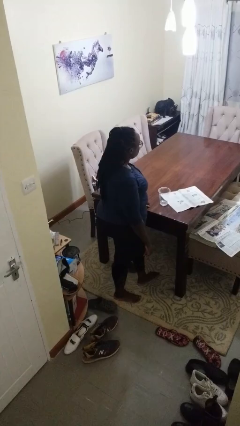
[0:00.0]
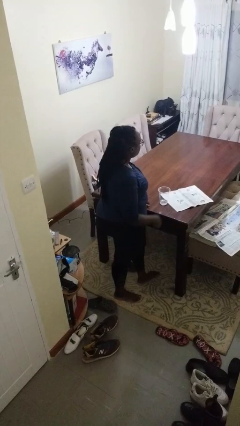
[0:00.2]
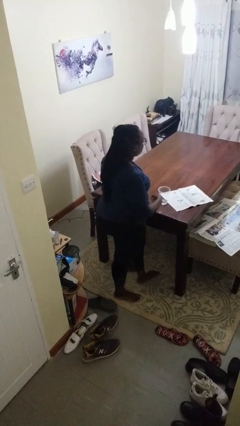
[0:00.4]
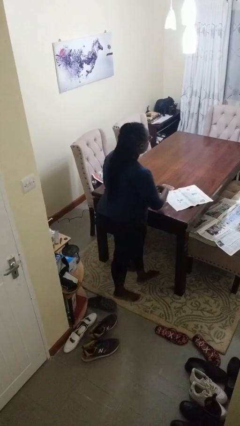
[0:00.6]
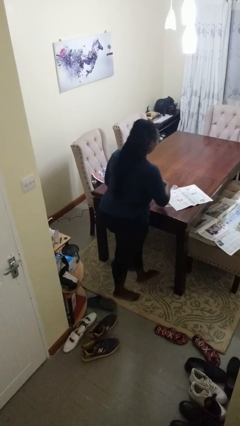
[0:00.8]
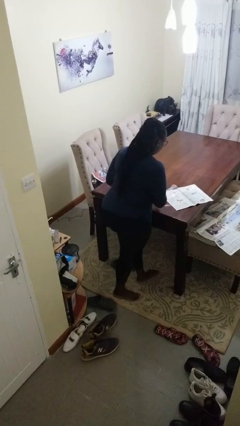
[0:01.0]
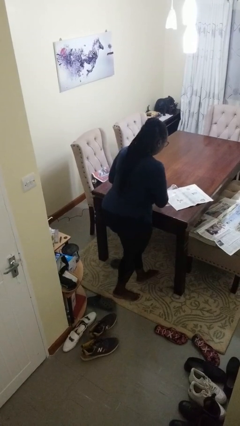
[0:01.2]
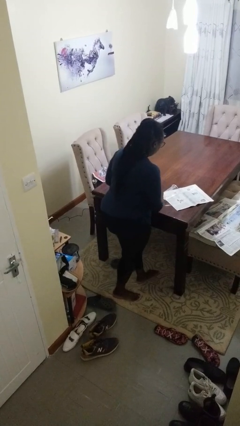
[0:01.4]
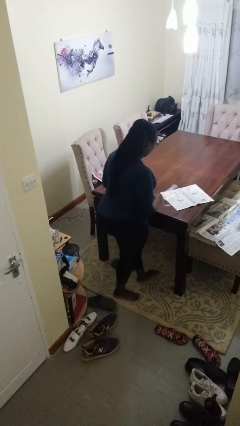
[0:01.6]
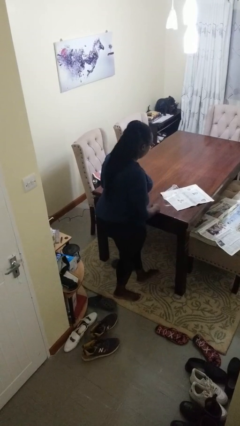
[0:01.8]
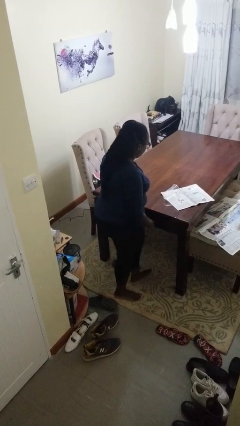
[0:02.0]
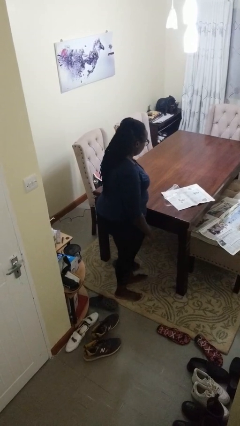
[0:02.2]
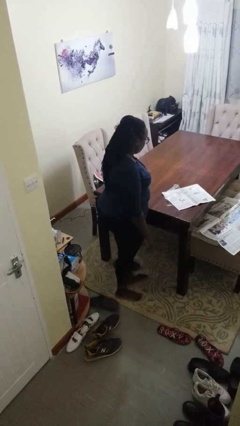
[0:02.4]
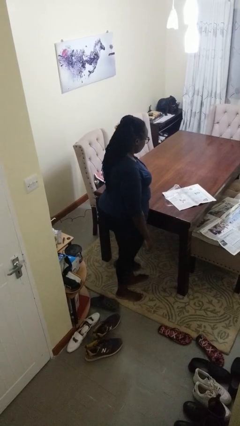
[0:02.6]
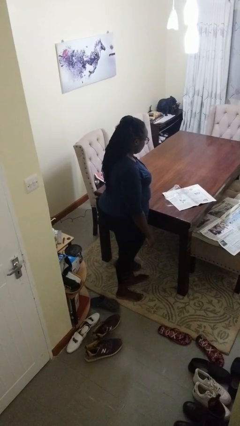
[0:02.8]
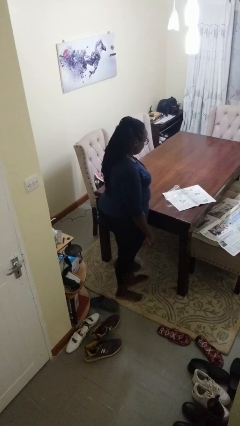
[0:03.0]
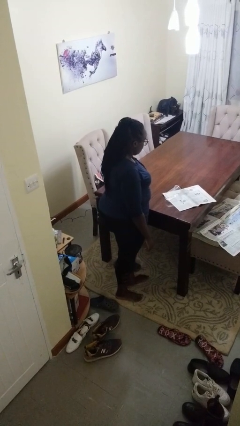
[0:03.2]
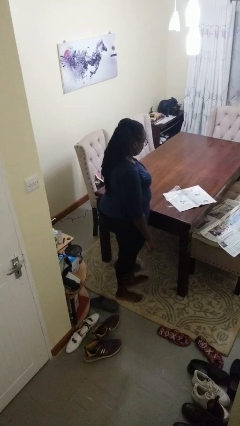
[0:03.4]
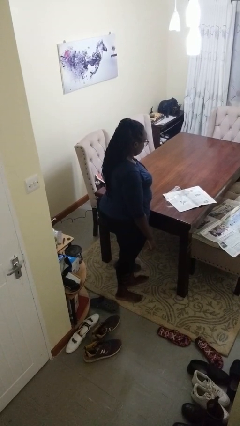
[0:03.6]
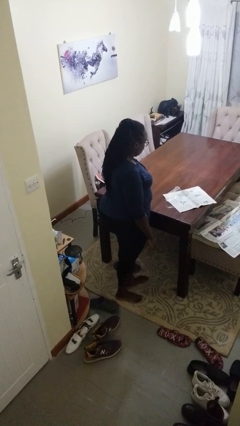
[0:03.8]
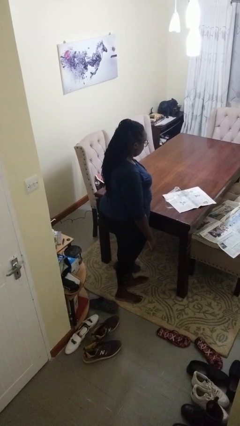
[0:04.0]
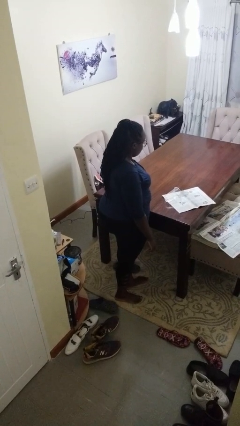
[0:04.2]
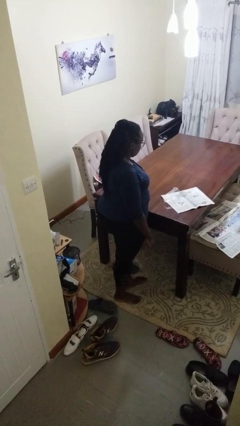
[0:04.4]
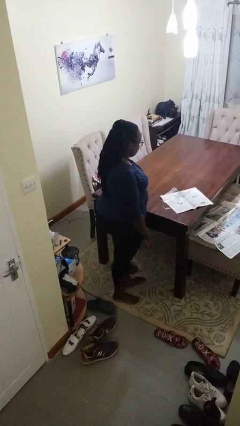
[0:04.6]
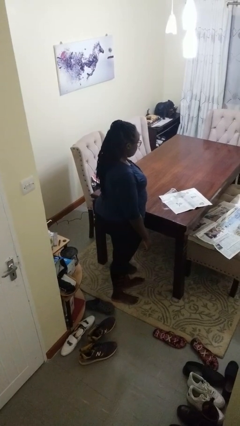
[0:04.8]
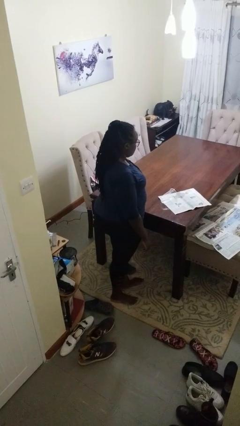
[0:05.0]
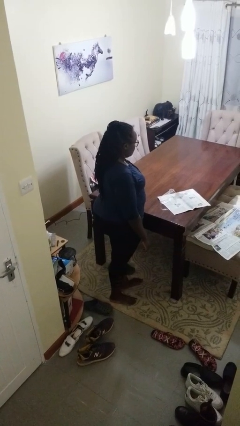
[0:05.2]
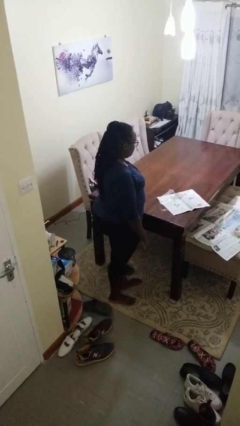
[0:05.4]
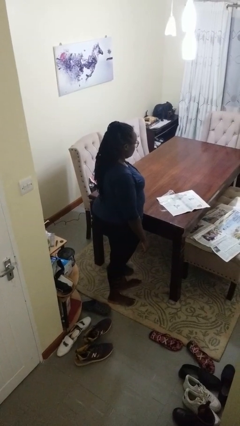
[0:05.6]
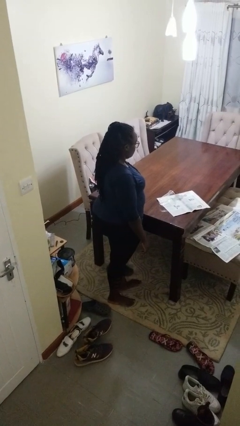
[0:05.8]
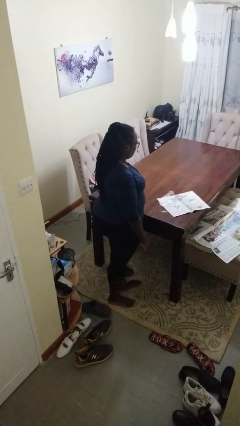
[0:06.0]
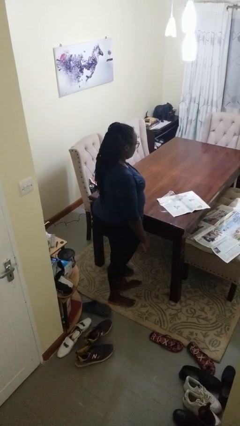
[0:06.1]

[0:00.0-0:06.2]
person spills on table

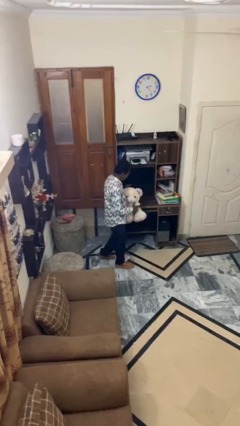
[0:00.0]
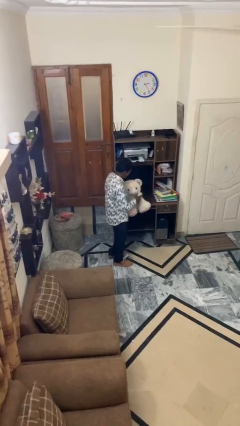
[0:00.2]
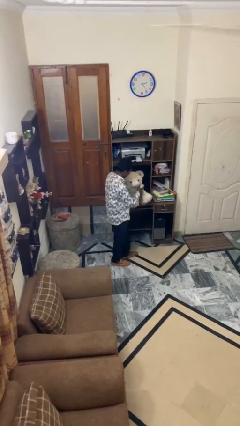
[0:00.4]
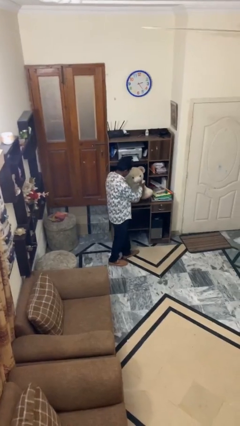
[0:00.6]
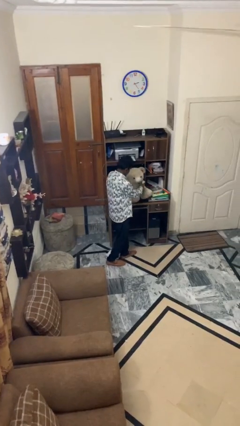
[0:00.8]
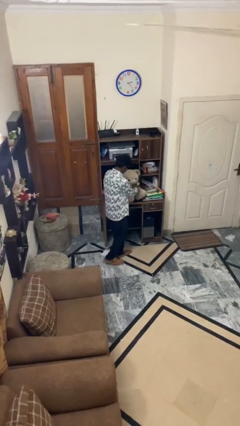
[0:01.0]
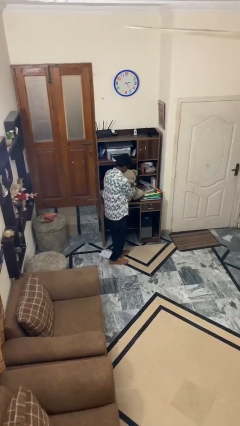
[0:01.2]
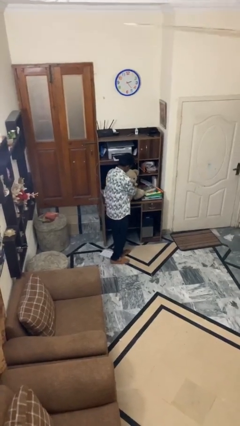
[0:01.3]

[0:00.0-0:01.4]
person puts down object on table

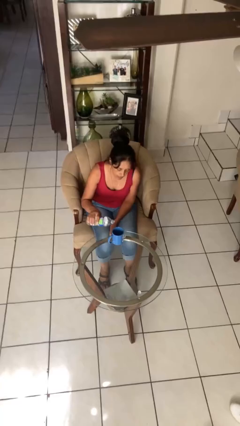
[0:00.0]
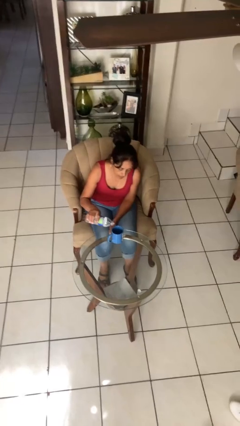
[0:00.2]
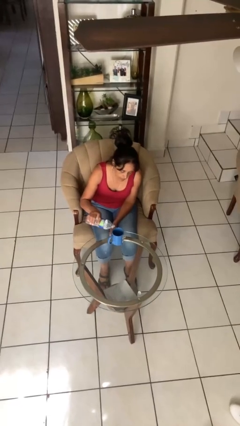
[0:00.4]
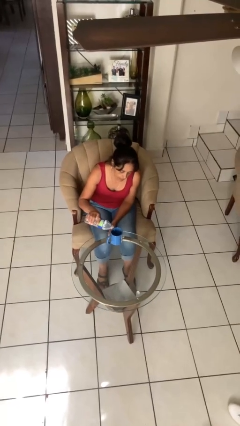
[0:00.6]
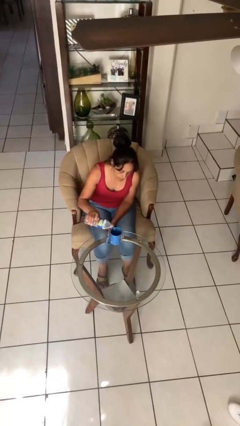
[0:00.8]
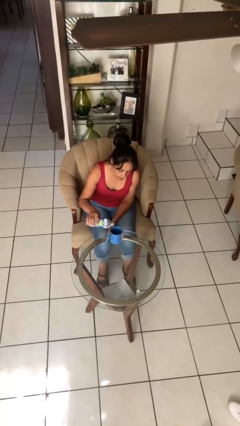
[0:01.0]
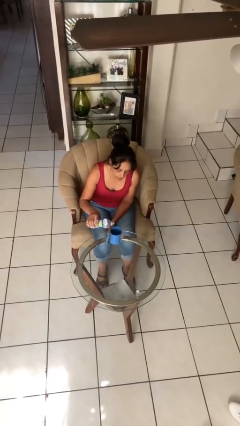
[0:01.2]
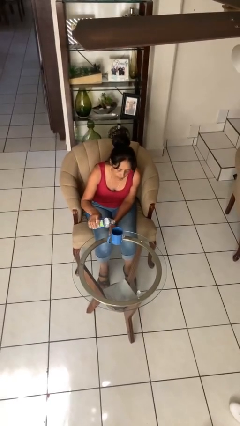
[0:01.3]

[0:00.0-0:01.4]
person pours liquid into cup

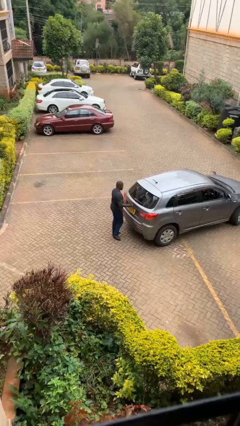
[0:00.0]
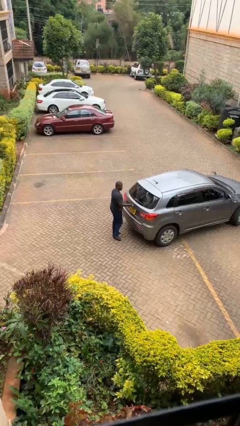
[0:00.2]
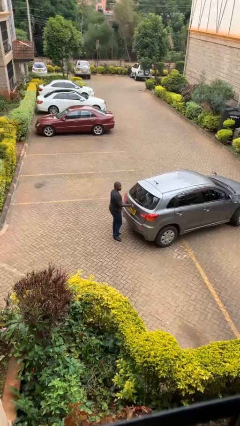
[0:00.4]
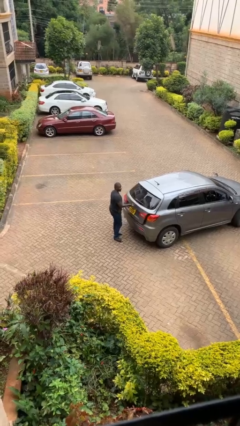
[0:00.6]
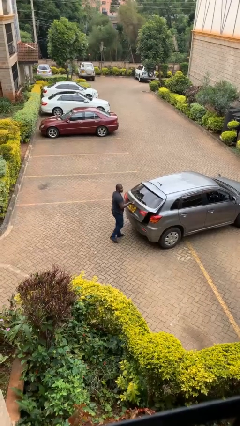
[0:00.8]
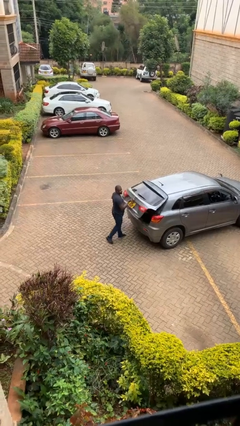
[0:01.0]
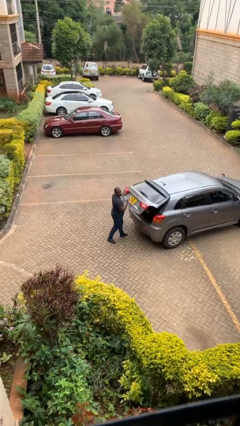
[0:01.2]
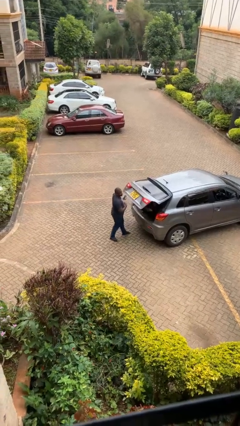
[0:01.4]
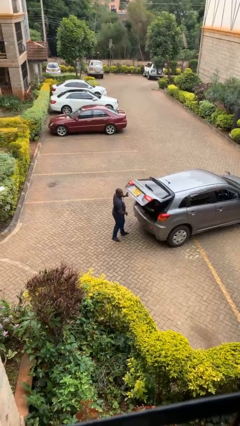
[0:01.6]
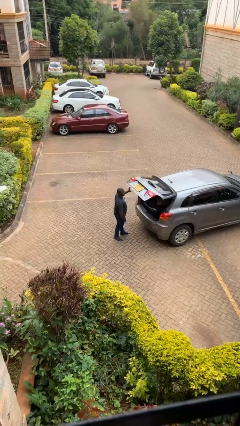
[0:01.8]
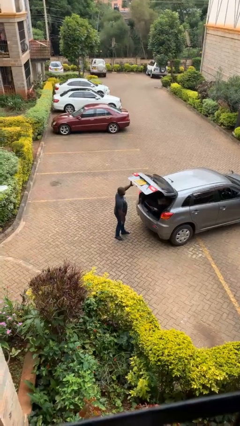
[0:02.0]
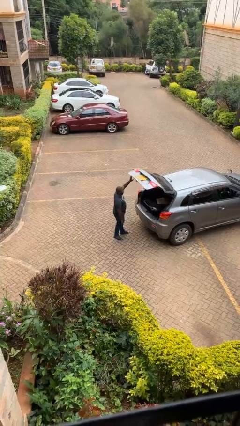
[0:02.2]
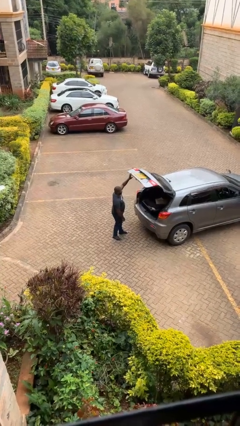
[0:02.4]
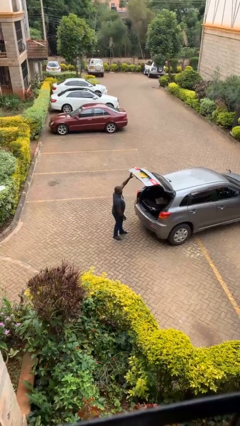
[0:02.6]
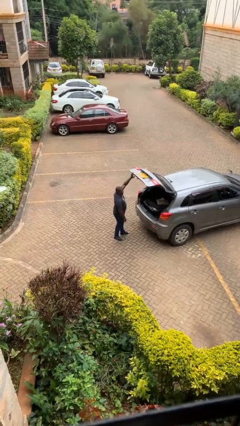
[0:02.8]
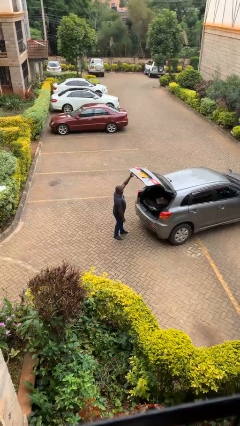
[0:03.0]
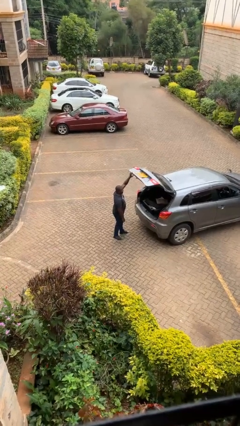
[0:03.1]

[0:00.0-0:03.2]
person opens car trunk

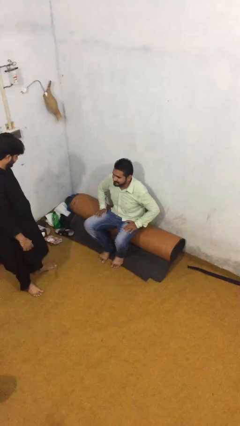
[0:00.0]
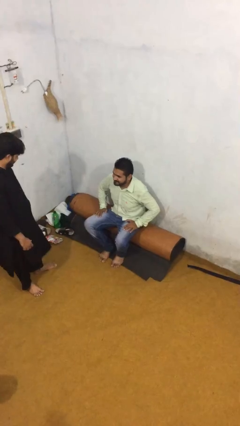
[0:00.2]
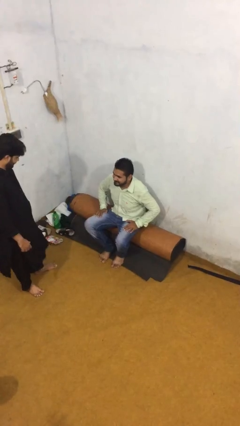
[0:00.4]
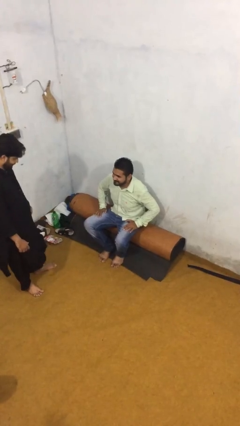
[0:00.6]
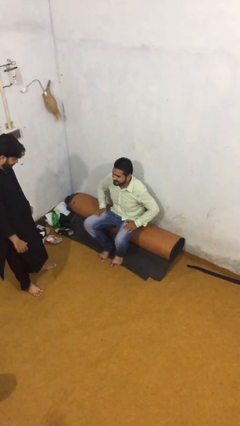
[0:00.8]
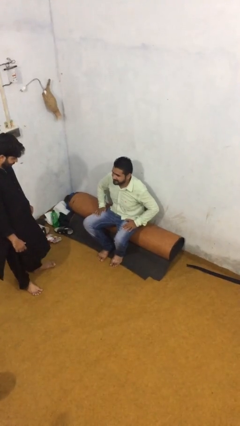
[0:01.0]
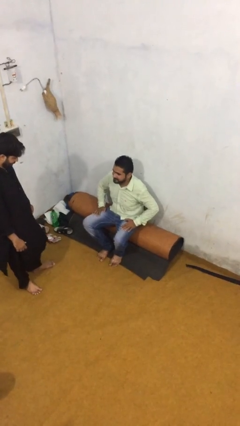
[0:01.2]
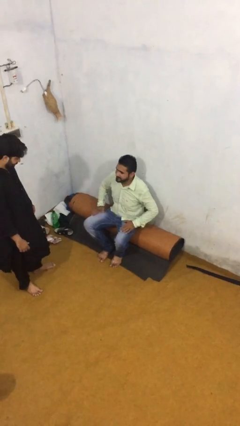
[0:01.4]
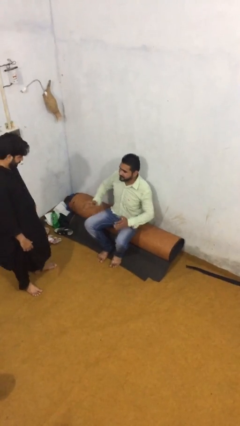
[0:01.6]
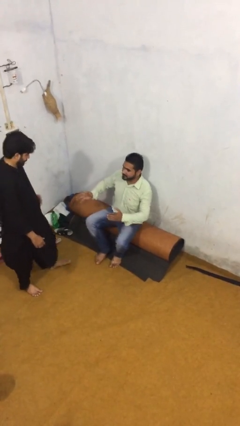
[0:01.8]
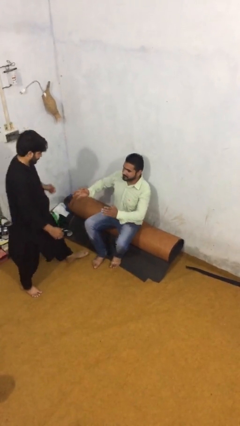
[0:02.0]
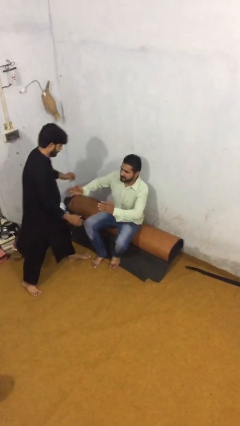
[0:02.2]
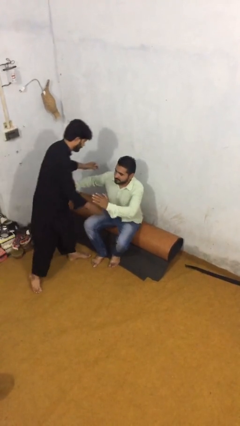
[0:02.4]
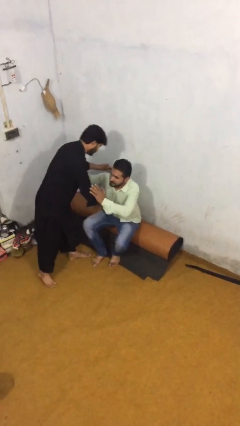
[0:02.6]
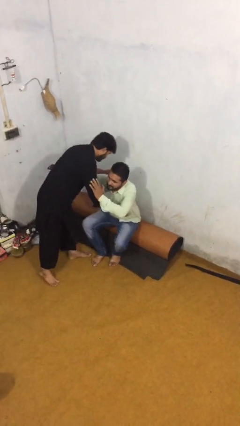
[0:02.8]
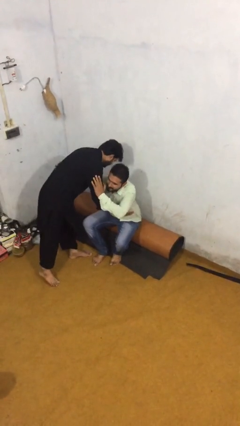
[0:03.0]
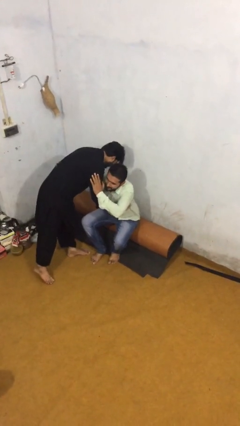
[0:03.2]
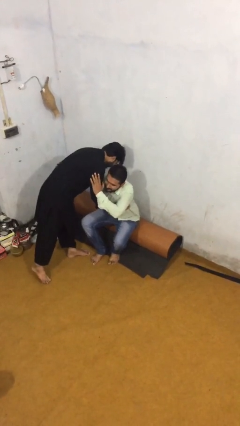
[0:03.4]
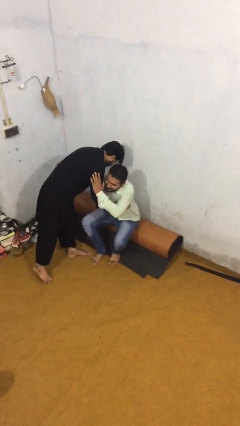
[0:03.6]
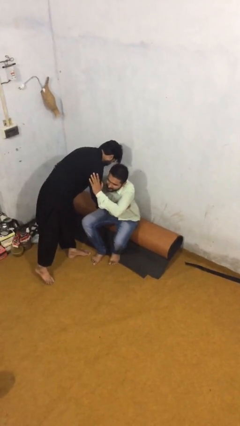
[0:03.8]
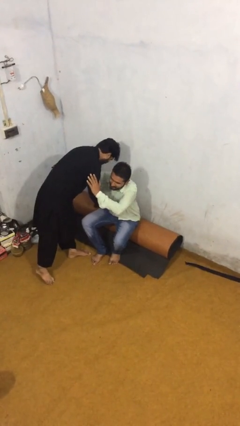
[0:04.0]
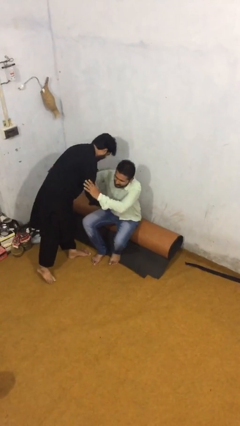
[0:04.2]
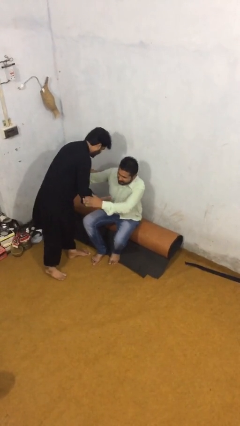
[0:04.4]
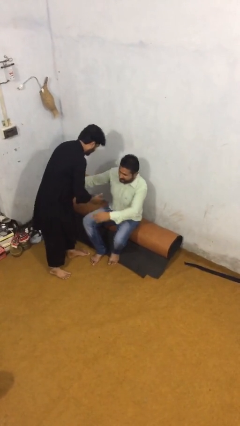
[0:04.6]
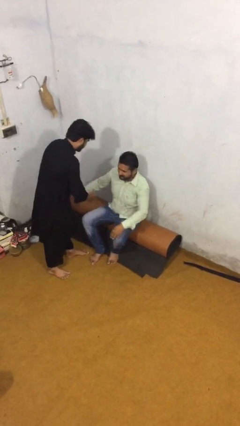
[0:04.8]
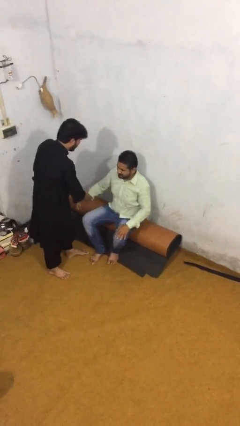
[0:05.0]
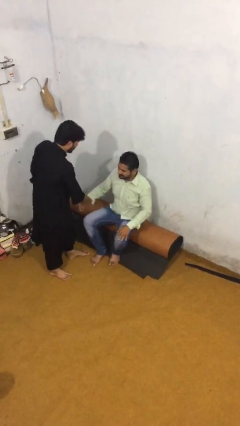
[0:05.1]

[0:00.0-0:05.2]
person embraces person

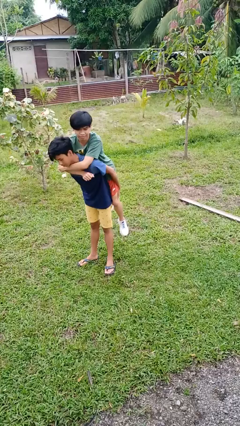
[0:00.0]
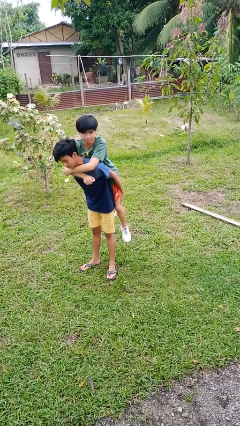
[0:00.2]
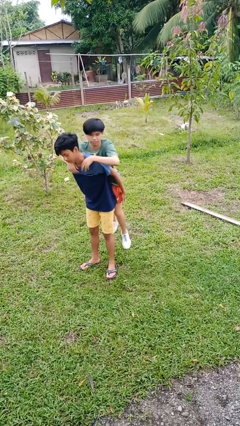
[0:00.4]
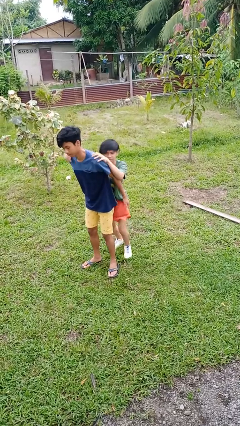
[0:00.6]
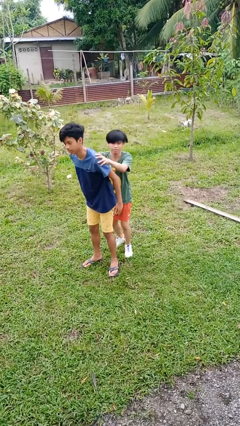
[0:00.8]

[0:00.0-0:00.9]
person puts down person
